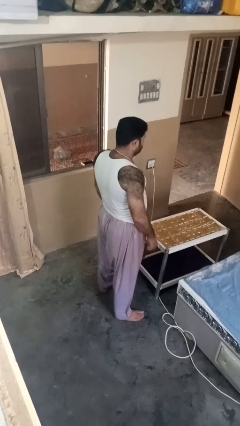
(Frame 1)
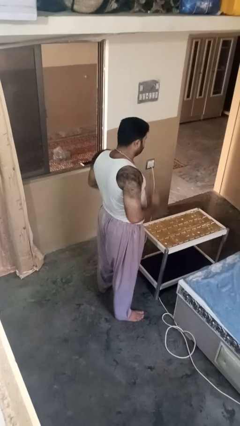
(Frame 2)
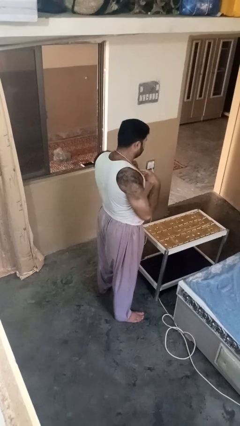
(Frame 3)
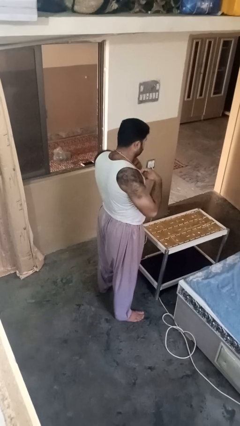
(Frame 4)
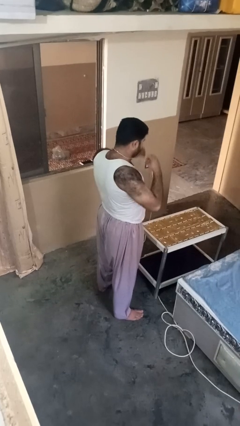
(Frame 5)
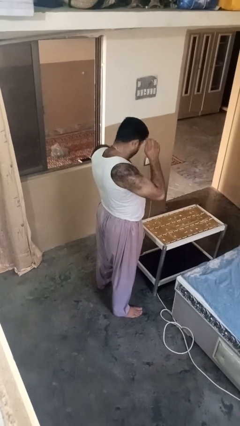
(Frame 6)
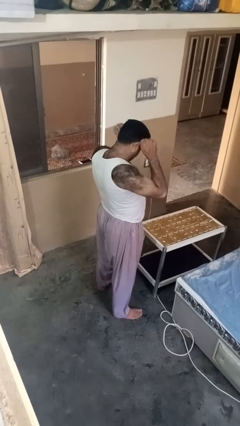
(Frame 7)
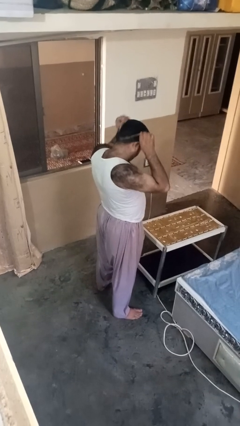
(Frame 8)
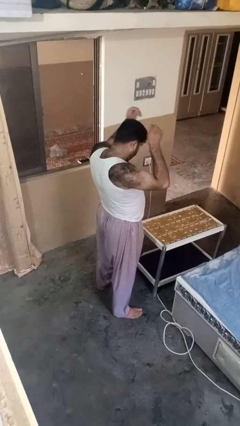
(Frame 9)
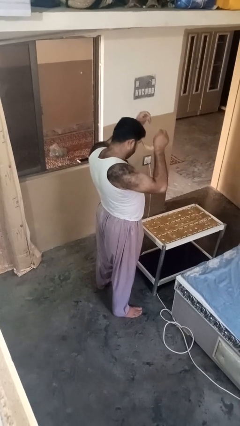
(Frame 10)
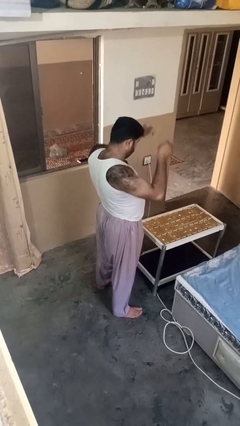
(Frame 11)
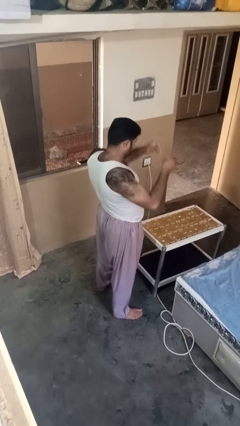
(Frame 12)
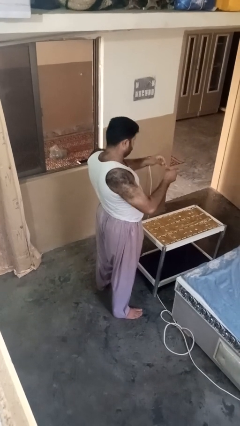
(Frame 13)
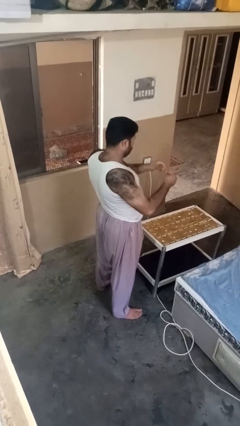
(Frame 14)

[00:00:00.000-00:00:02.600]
person takes off necklace

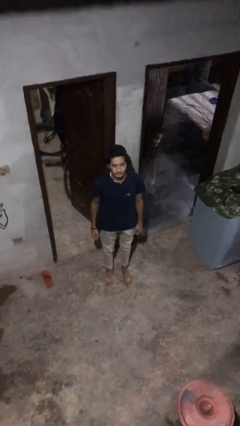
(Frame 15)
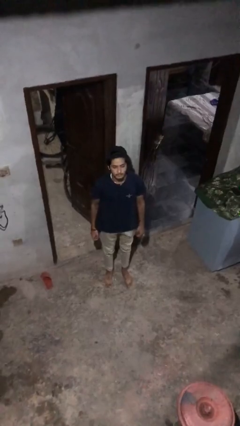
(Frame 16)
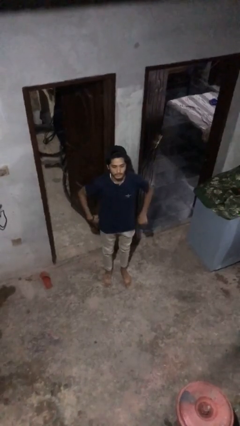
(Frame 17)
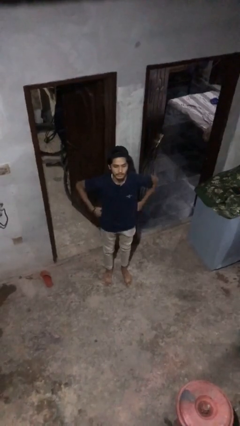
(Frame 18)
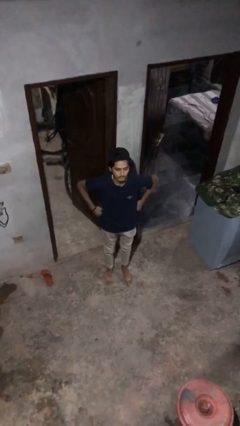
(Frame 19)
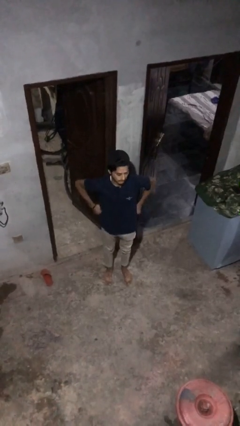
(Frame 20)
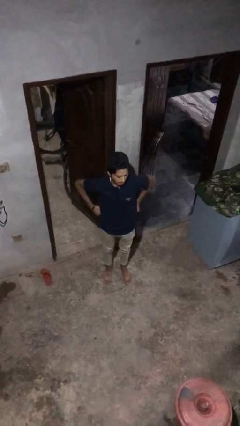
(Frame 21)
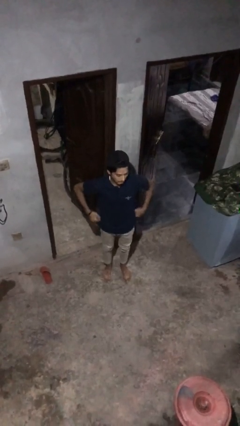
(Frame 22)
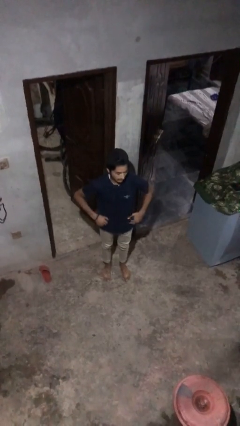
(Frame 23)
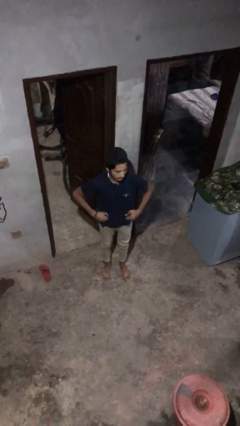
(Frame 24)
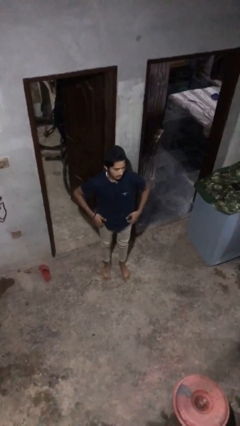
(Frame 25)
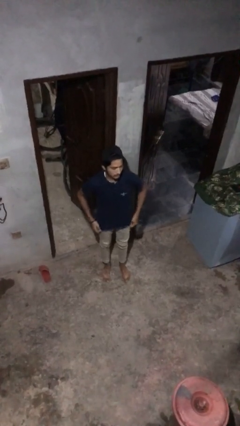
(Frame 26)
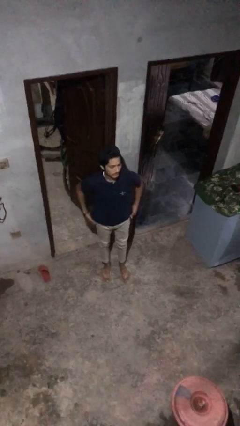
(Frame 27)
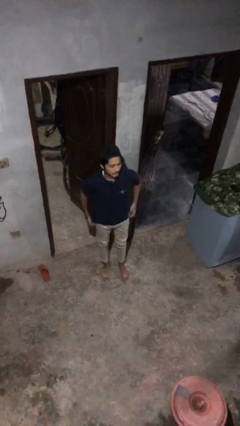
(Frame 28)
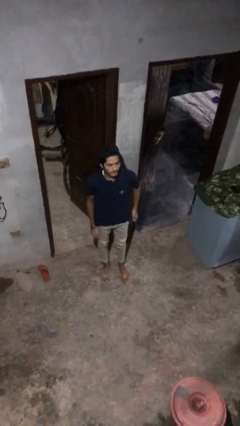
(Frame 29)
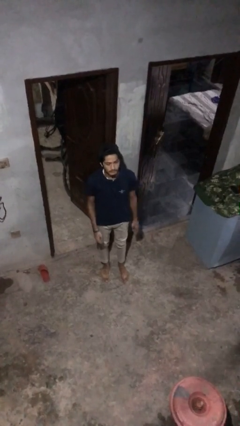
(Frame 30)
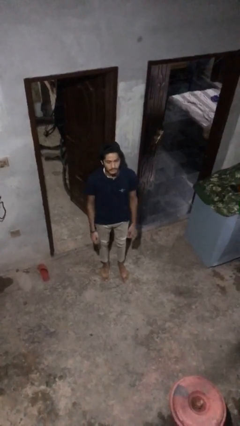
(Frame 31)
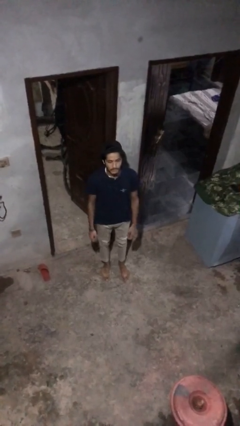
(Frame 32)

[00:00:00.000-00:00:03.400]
person hikes up pants

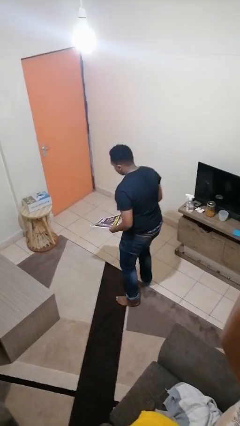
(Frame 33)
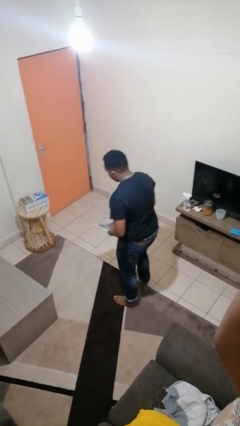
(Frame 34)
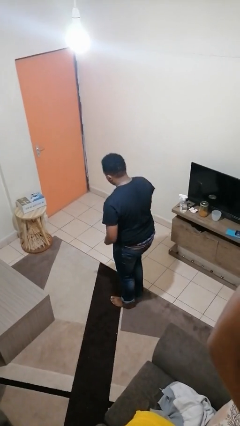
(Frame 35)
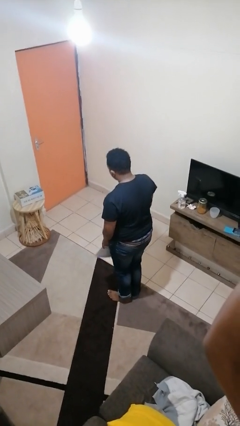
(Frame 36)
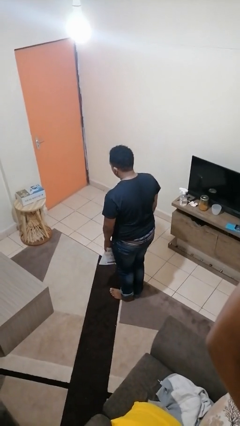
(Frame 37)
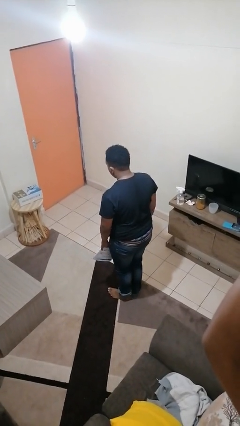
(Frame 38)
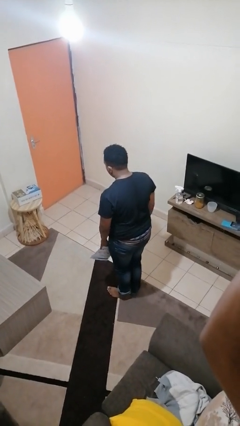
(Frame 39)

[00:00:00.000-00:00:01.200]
person picks up object from floor

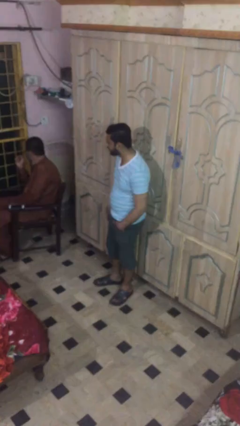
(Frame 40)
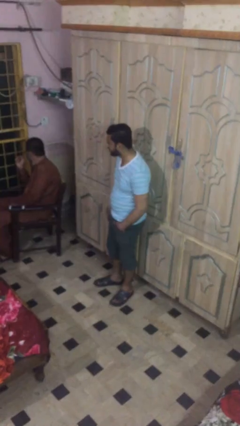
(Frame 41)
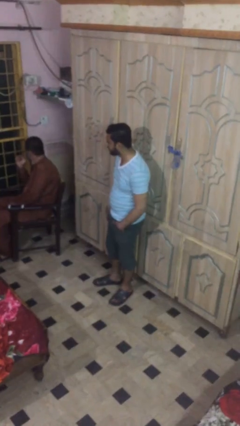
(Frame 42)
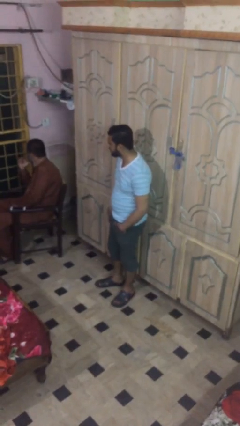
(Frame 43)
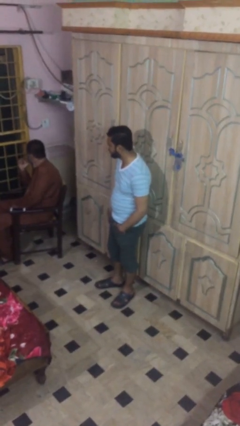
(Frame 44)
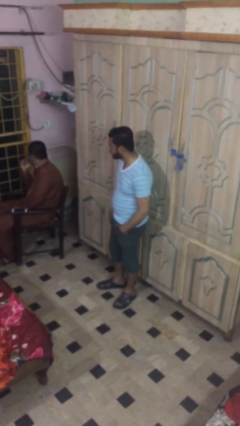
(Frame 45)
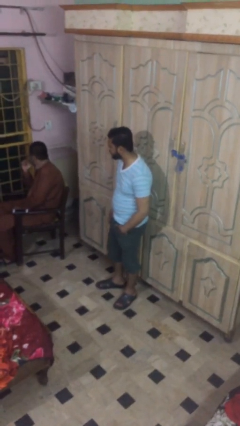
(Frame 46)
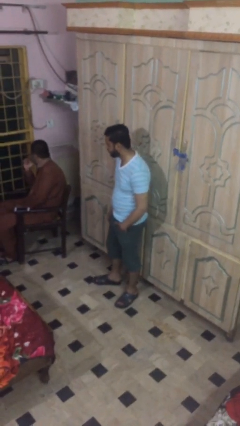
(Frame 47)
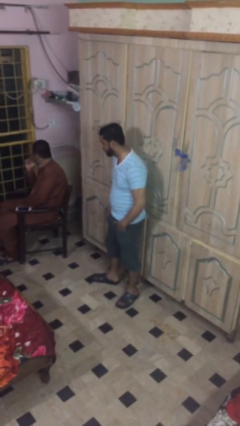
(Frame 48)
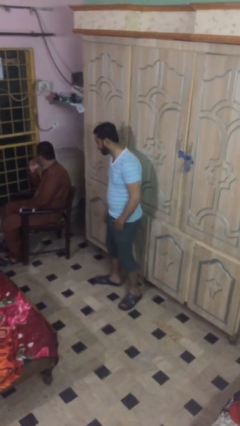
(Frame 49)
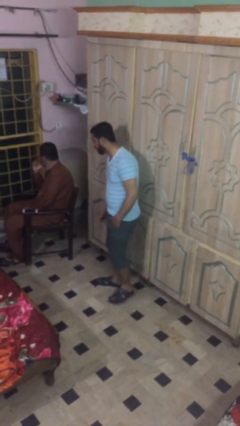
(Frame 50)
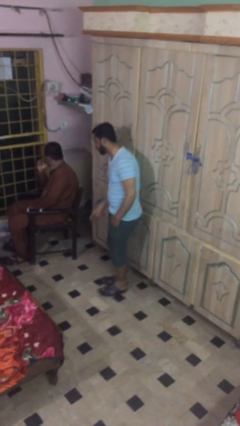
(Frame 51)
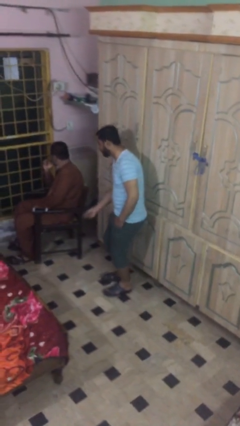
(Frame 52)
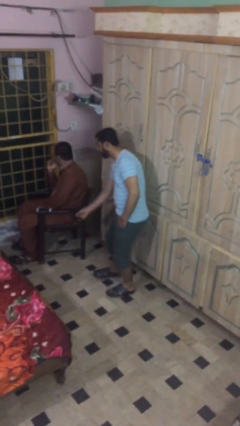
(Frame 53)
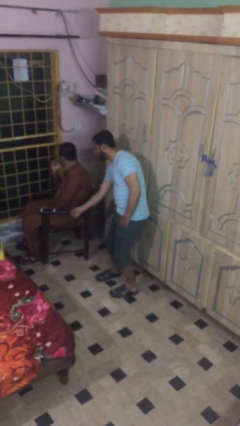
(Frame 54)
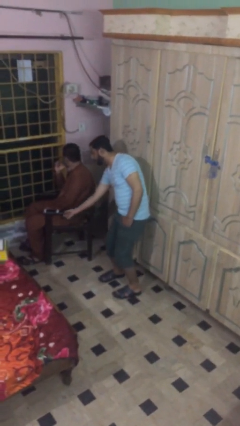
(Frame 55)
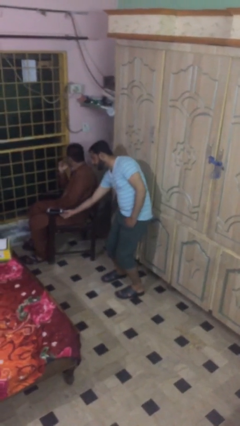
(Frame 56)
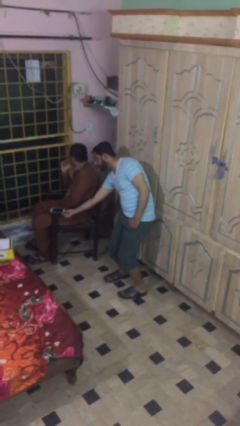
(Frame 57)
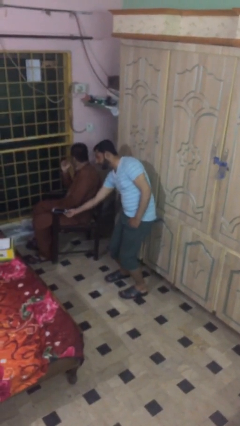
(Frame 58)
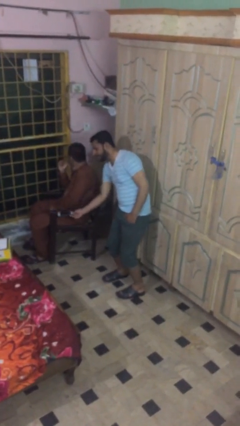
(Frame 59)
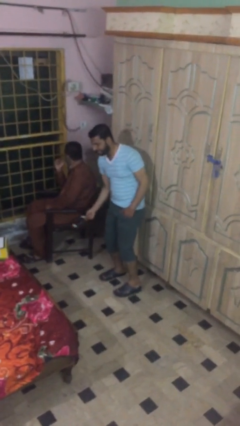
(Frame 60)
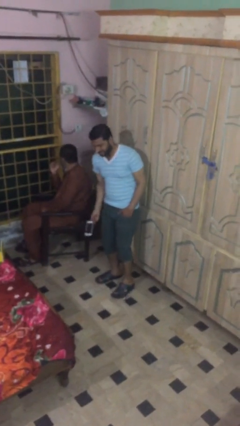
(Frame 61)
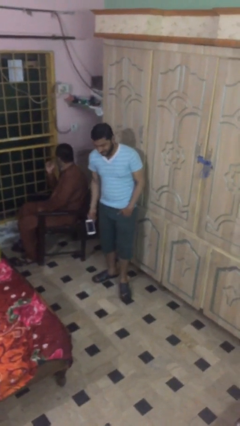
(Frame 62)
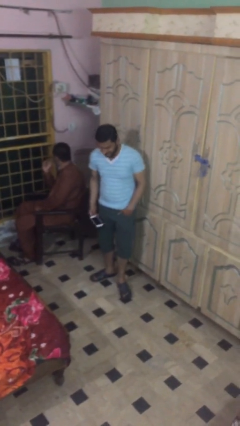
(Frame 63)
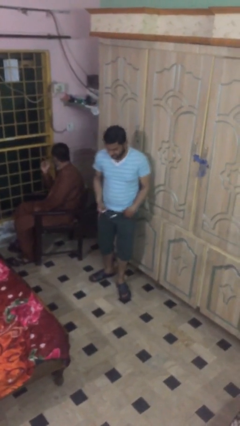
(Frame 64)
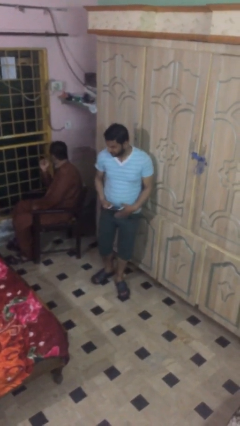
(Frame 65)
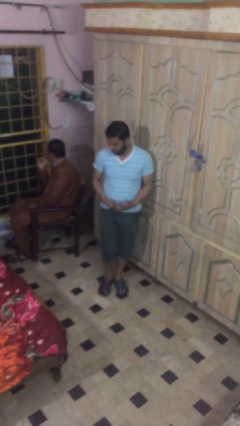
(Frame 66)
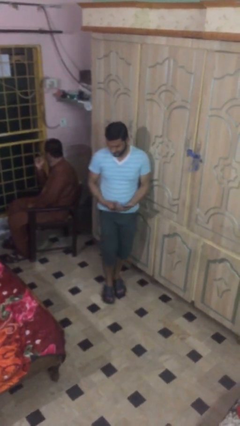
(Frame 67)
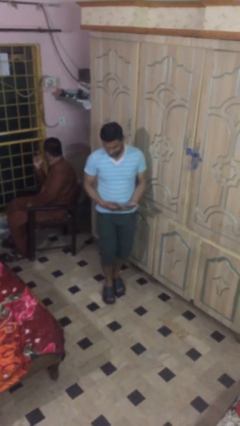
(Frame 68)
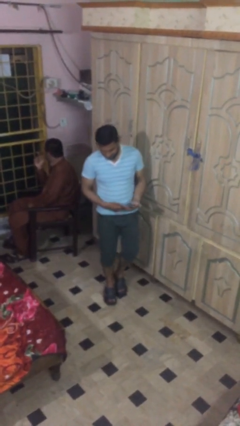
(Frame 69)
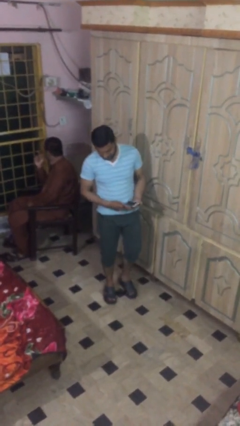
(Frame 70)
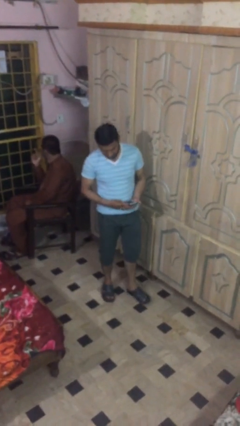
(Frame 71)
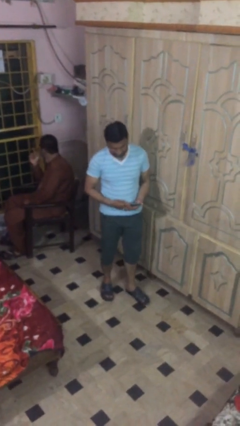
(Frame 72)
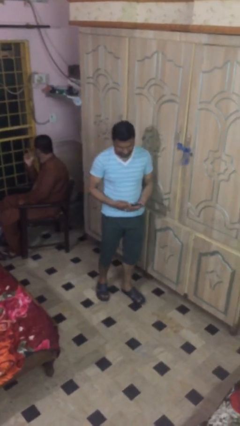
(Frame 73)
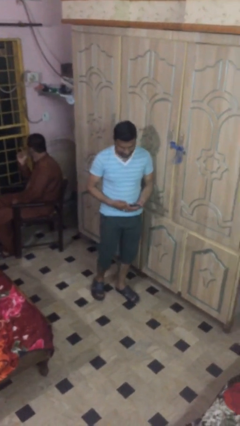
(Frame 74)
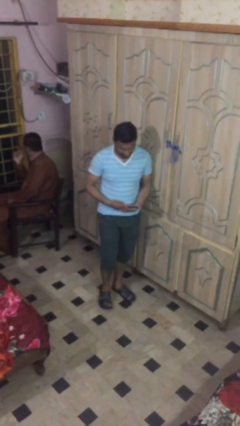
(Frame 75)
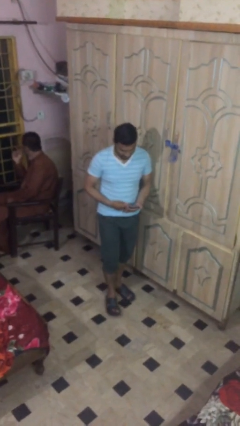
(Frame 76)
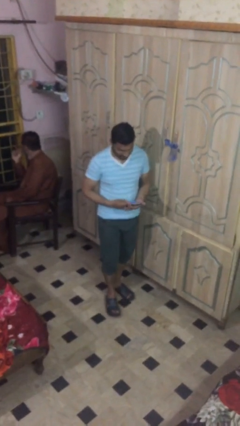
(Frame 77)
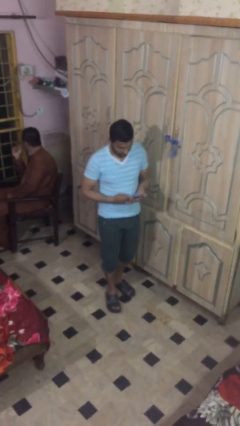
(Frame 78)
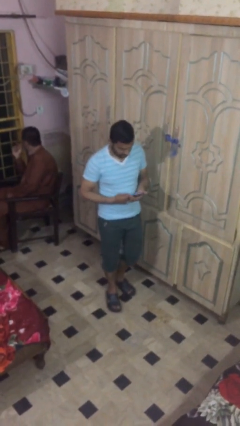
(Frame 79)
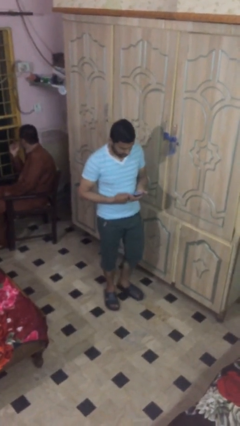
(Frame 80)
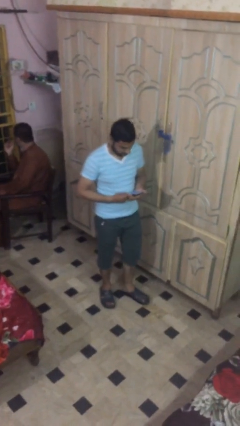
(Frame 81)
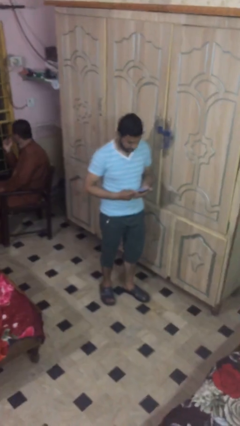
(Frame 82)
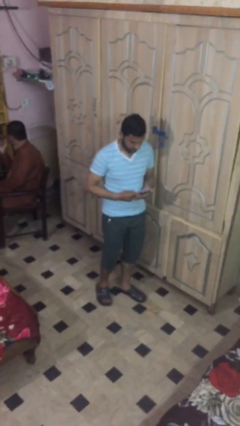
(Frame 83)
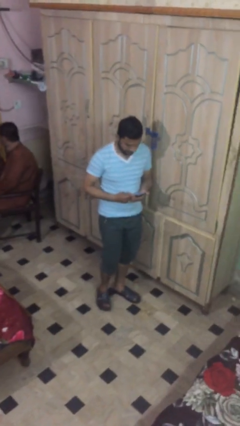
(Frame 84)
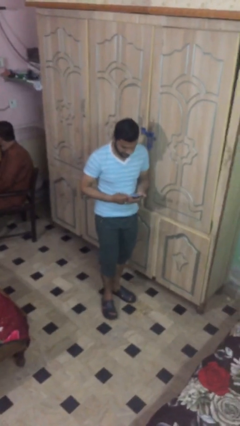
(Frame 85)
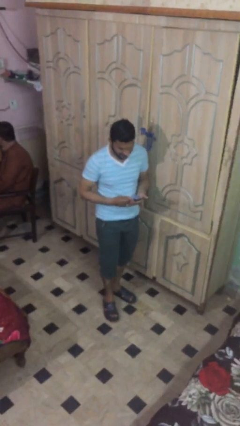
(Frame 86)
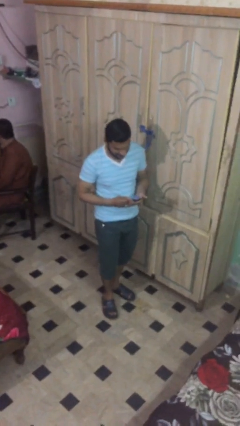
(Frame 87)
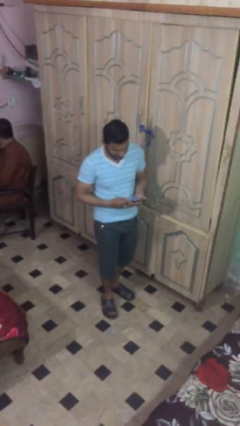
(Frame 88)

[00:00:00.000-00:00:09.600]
person steals object from person

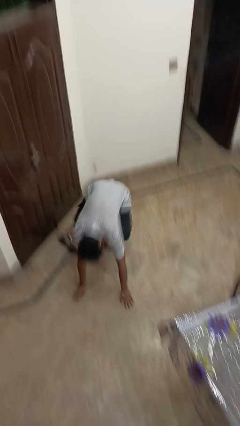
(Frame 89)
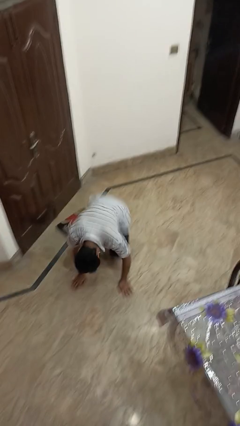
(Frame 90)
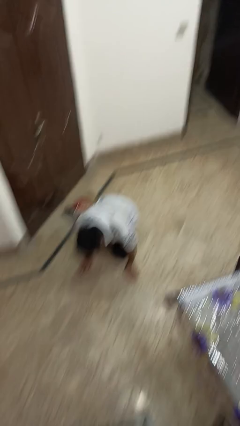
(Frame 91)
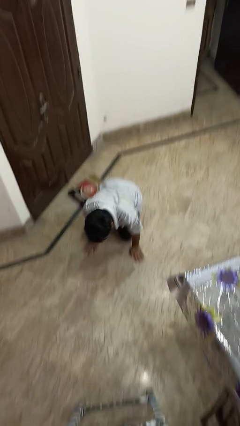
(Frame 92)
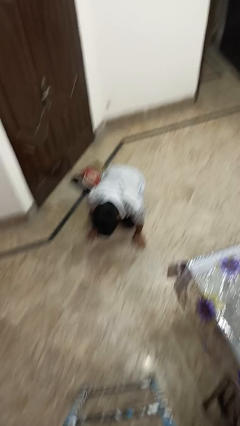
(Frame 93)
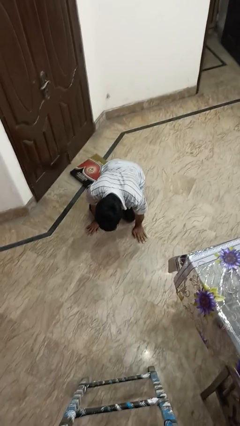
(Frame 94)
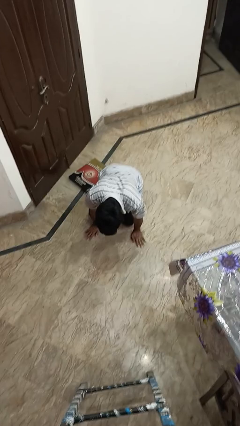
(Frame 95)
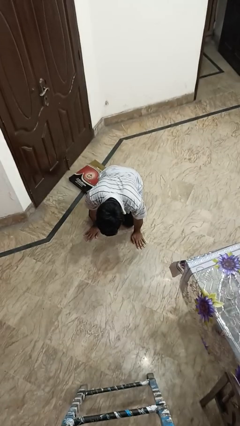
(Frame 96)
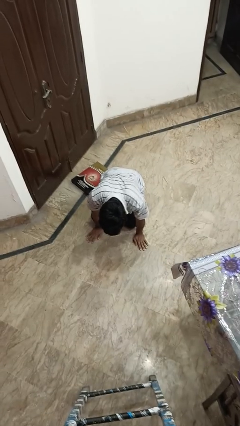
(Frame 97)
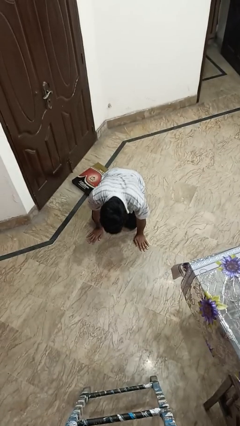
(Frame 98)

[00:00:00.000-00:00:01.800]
person trips on object on floor
